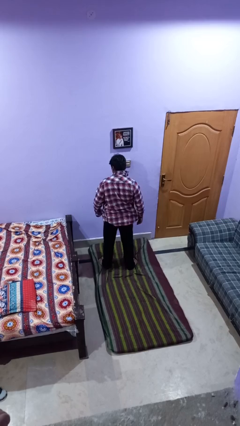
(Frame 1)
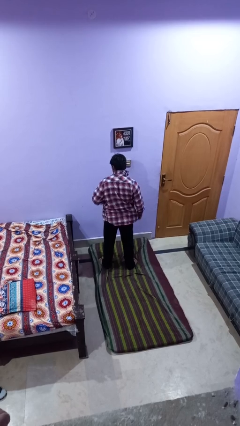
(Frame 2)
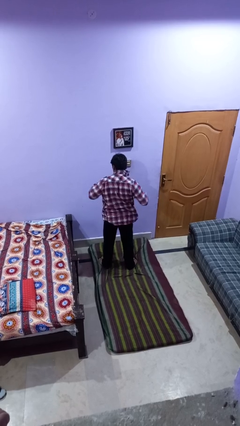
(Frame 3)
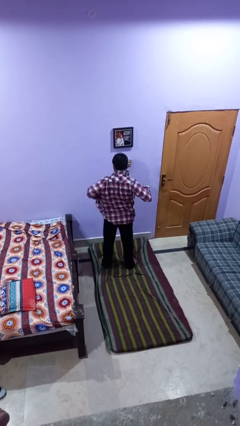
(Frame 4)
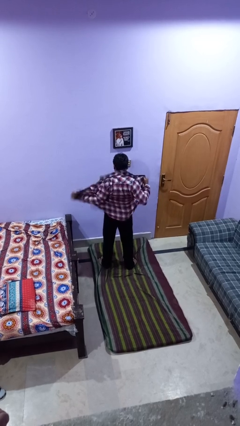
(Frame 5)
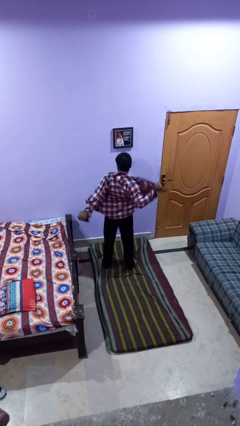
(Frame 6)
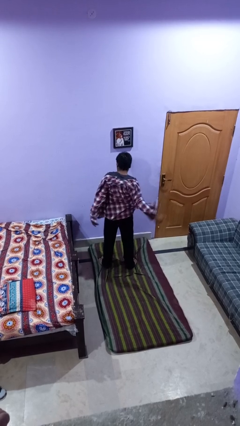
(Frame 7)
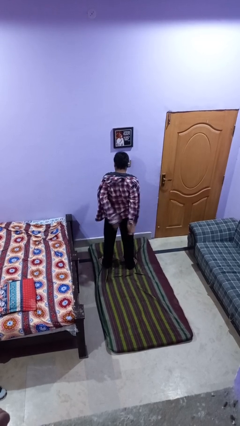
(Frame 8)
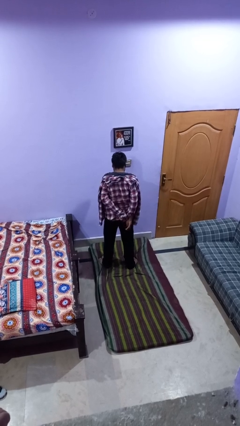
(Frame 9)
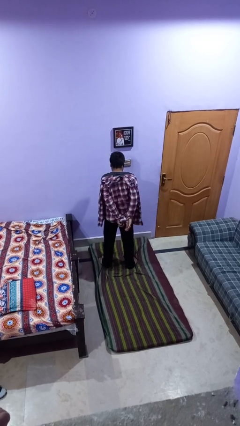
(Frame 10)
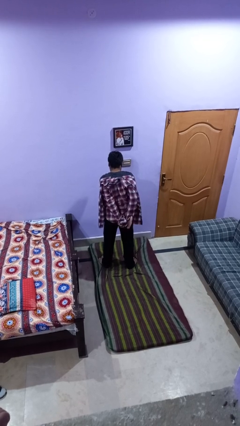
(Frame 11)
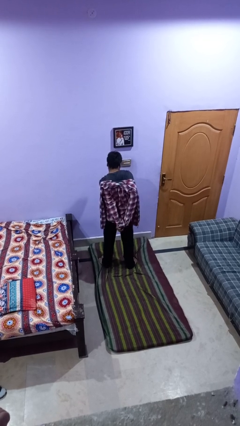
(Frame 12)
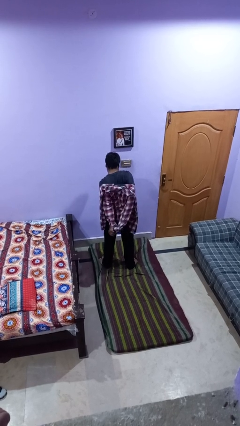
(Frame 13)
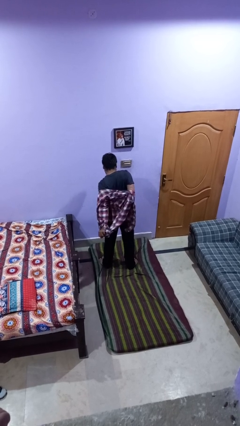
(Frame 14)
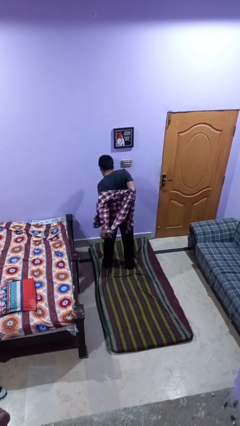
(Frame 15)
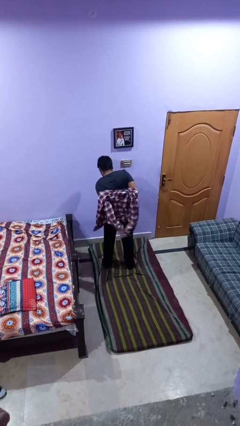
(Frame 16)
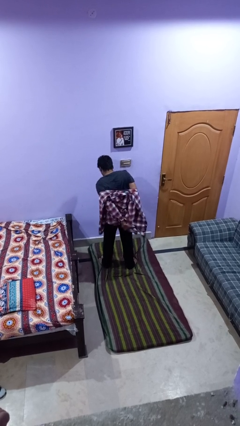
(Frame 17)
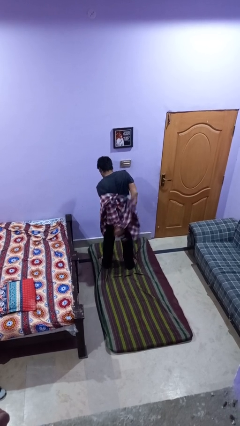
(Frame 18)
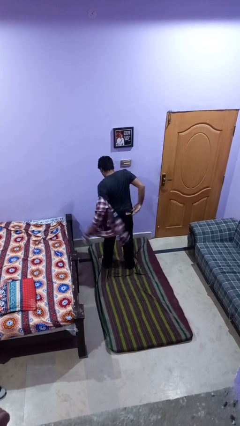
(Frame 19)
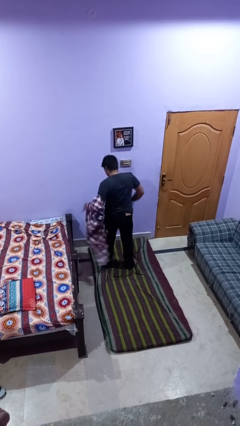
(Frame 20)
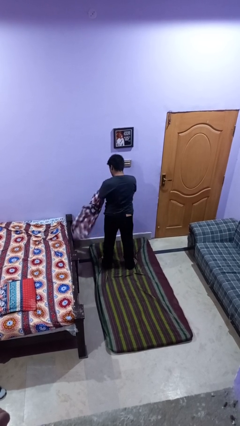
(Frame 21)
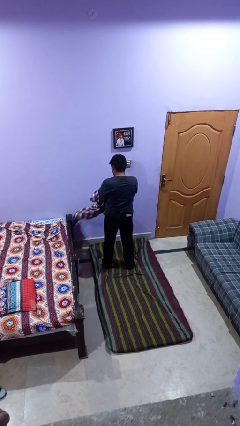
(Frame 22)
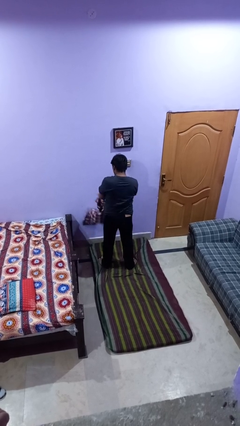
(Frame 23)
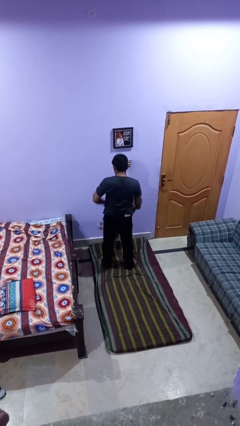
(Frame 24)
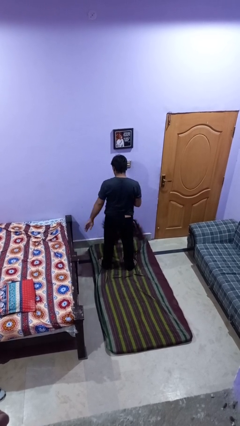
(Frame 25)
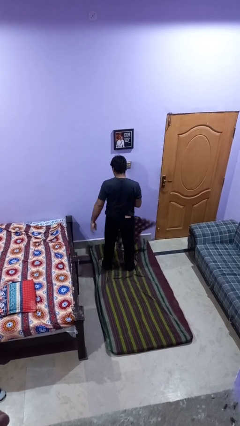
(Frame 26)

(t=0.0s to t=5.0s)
person takes off shirt

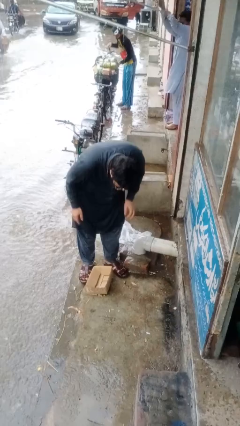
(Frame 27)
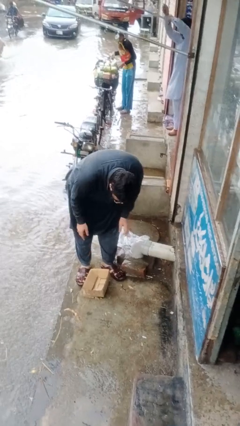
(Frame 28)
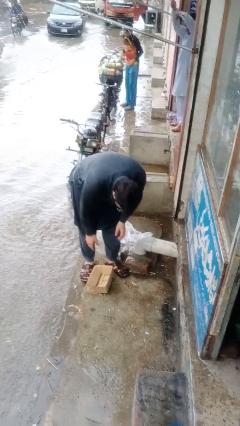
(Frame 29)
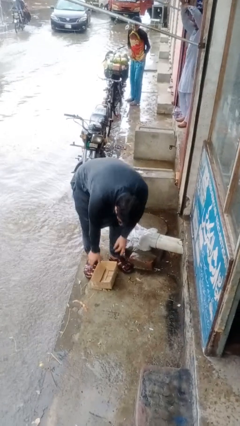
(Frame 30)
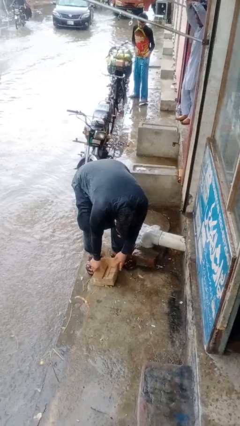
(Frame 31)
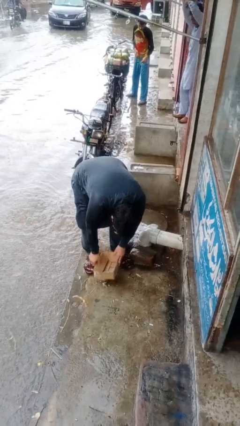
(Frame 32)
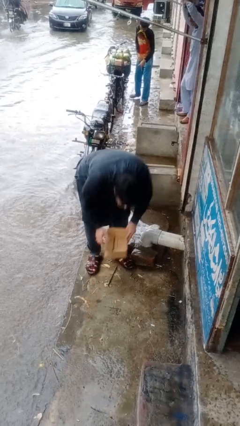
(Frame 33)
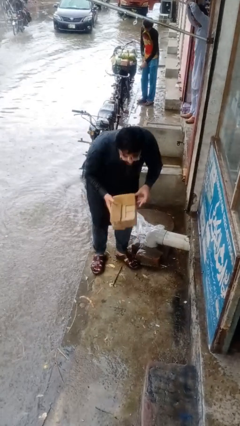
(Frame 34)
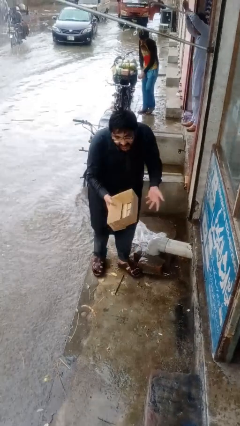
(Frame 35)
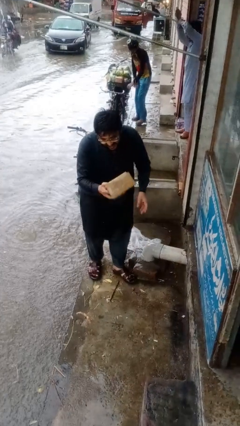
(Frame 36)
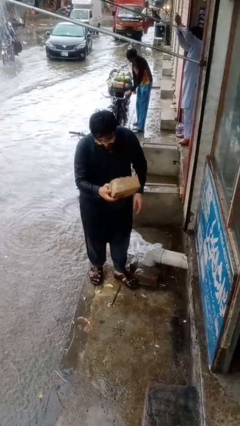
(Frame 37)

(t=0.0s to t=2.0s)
person picks up object from floor

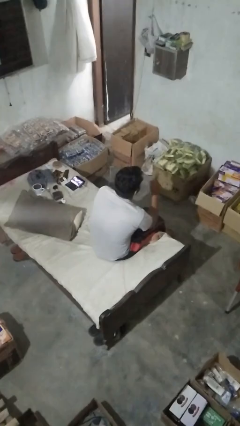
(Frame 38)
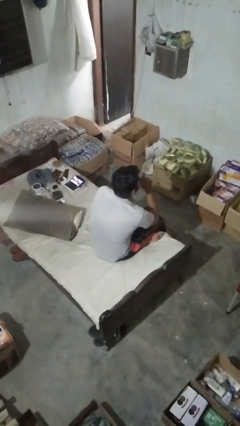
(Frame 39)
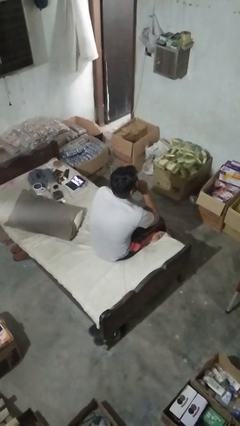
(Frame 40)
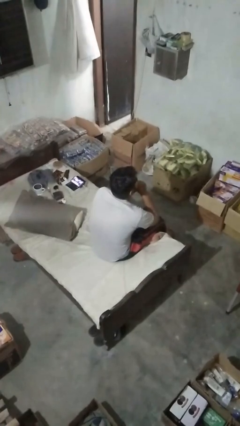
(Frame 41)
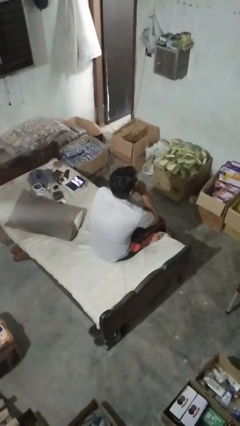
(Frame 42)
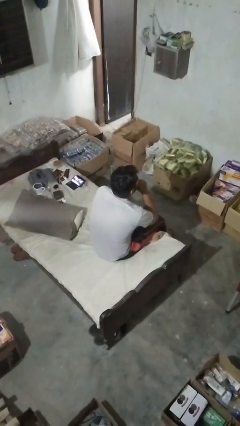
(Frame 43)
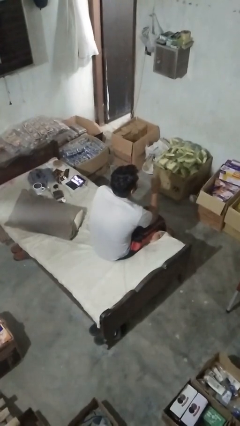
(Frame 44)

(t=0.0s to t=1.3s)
person gestures be quiet

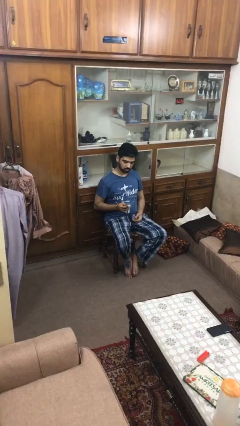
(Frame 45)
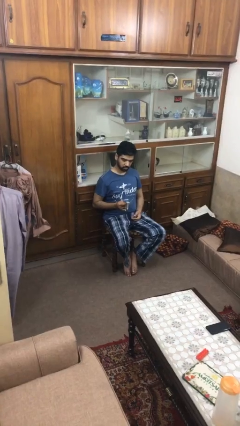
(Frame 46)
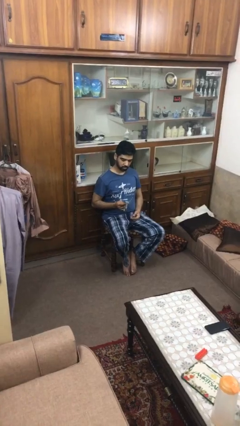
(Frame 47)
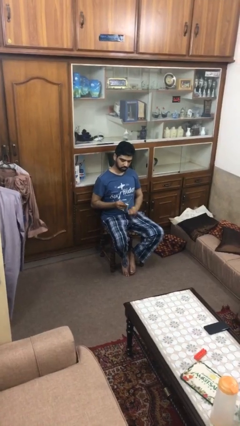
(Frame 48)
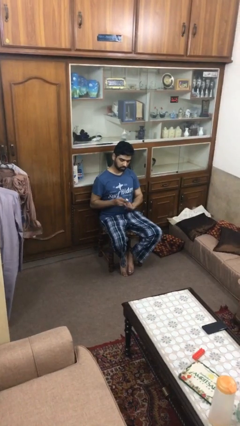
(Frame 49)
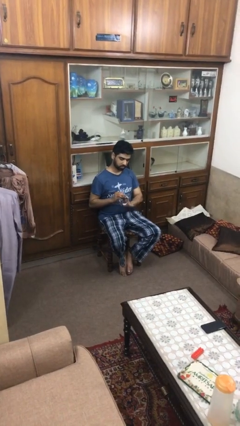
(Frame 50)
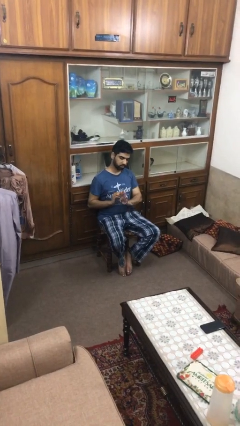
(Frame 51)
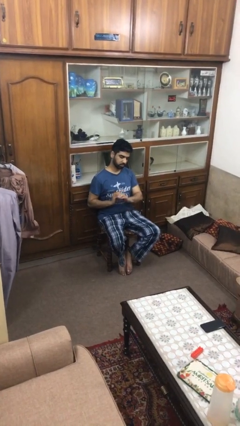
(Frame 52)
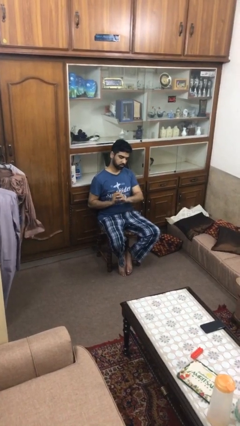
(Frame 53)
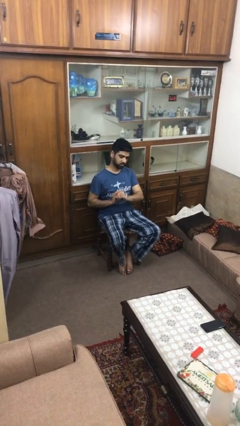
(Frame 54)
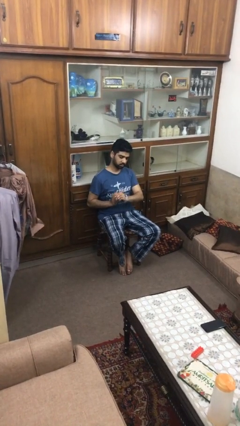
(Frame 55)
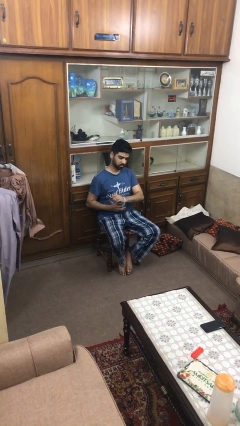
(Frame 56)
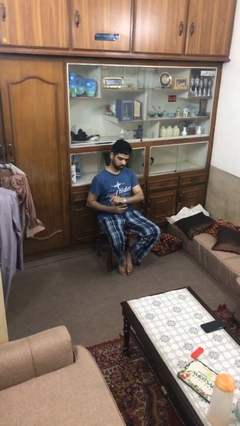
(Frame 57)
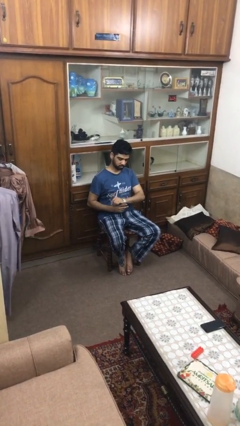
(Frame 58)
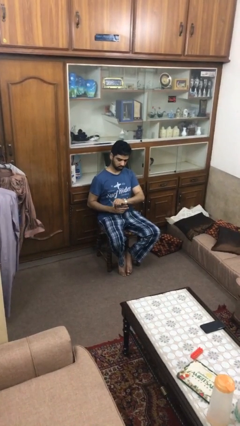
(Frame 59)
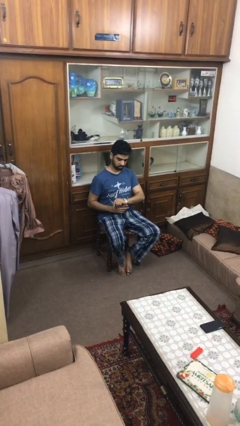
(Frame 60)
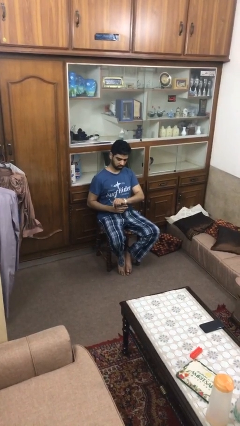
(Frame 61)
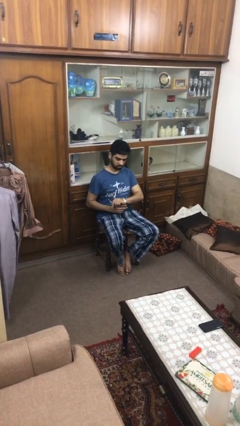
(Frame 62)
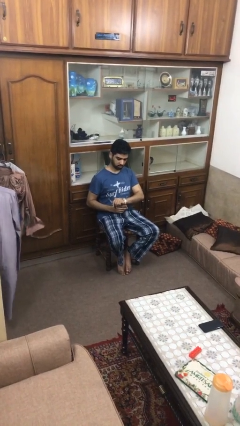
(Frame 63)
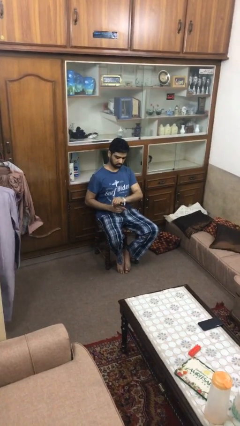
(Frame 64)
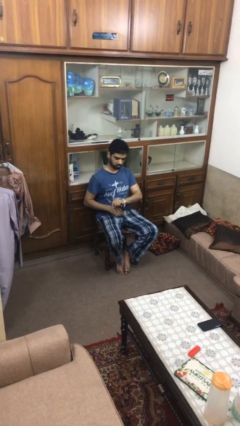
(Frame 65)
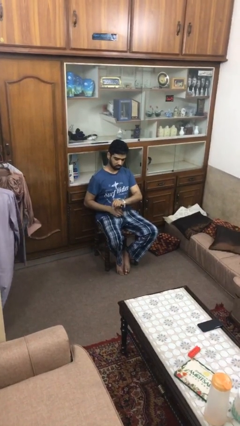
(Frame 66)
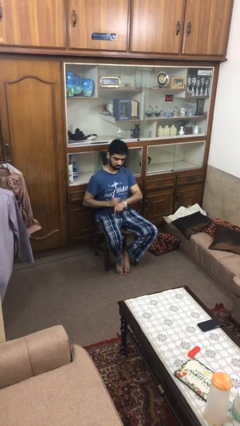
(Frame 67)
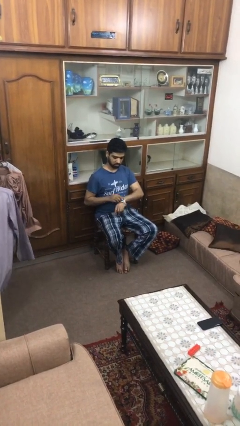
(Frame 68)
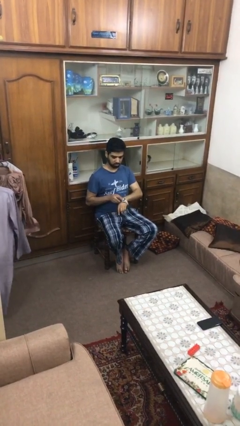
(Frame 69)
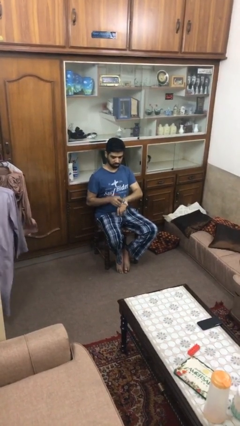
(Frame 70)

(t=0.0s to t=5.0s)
person puts on wristwatch

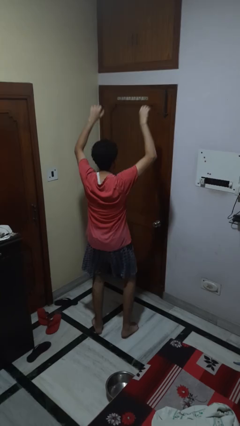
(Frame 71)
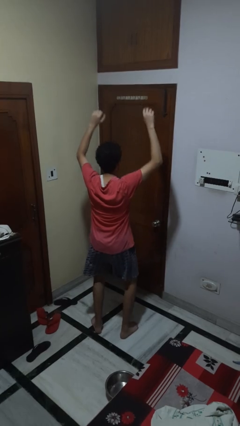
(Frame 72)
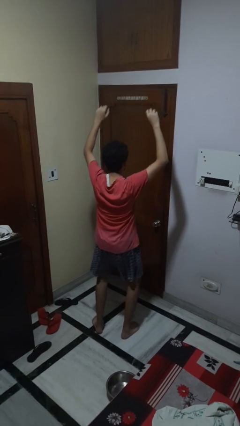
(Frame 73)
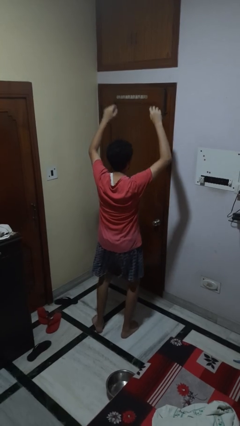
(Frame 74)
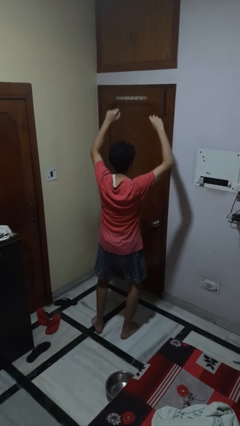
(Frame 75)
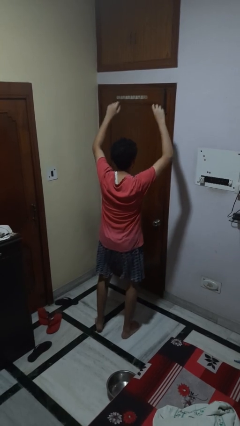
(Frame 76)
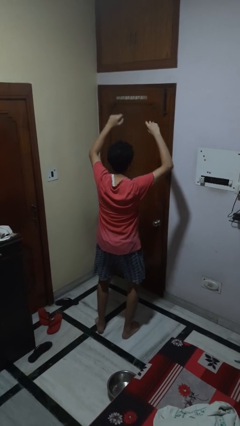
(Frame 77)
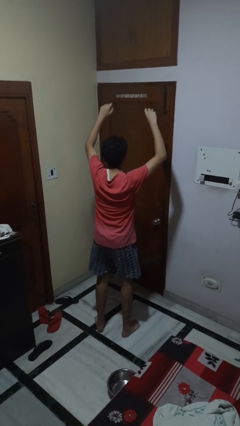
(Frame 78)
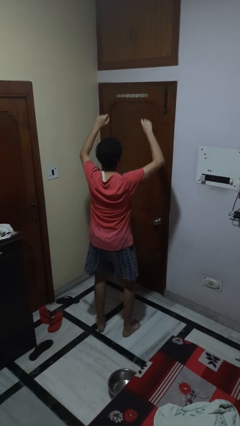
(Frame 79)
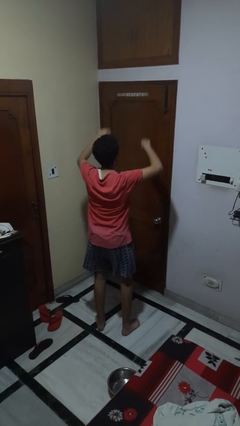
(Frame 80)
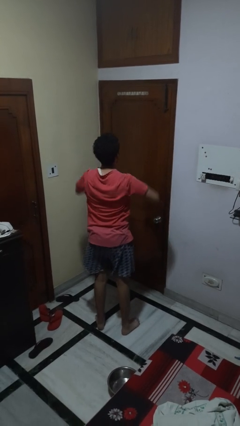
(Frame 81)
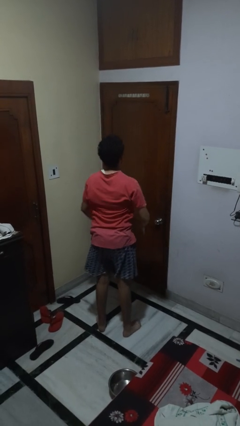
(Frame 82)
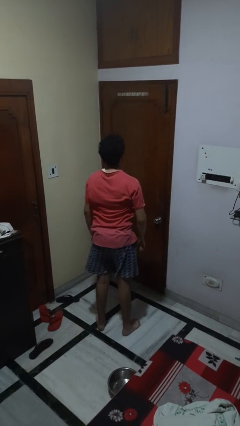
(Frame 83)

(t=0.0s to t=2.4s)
person dances in place

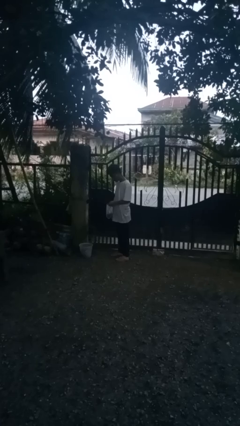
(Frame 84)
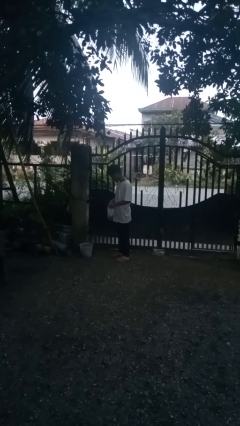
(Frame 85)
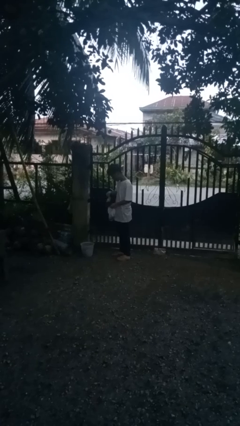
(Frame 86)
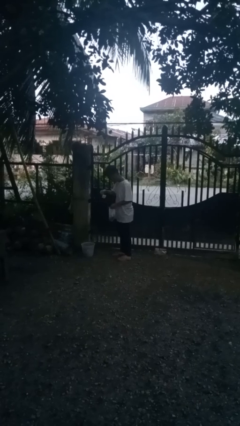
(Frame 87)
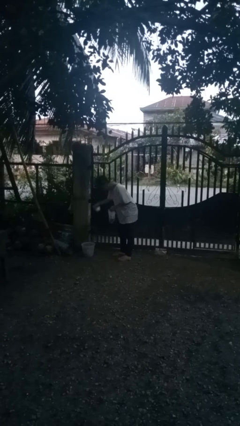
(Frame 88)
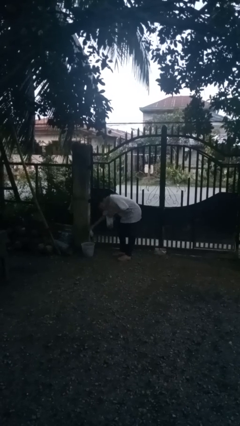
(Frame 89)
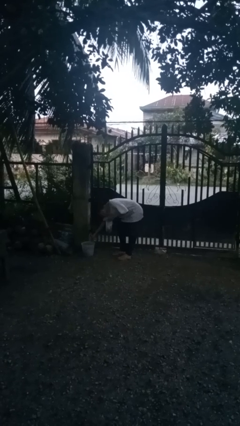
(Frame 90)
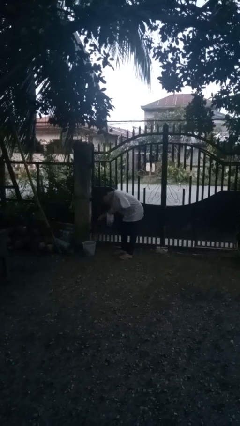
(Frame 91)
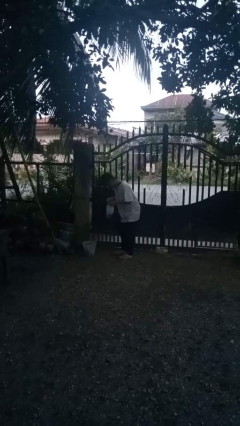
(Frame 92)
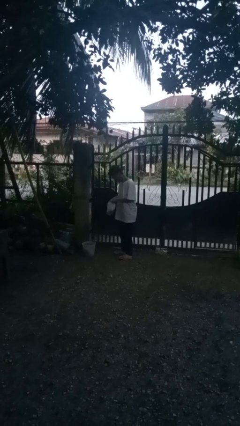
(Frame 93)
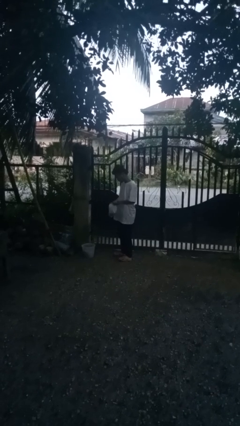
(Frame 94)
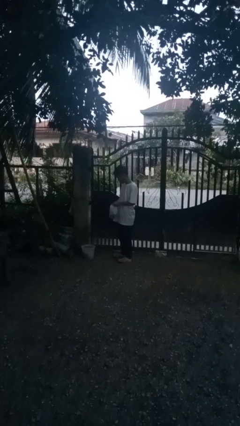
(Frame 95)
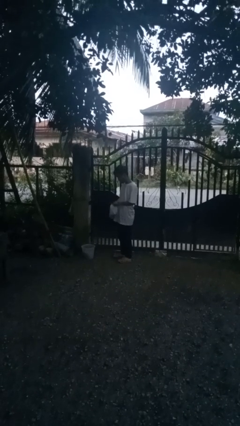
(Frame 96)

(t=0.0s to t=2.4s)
person discards trash
